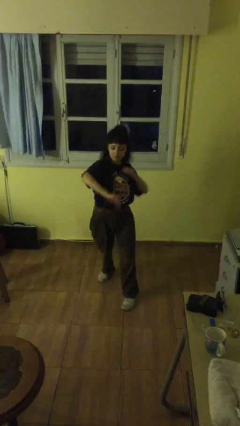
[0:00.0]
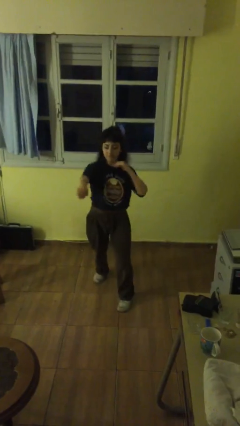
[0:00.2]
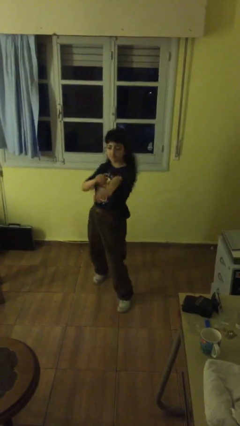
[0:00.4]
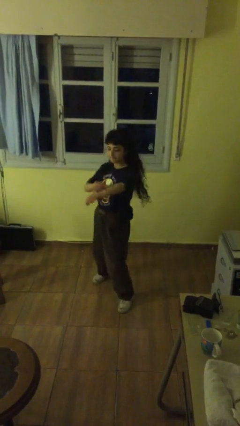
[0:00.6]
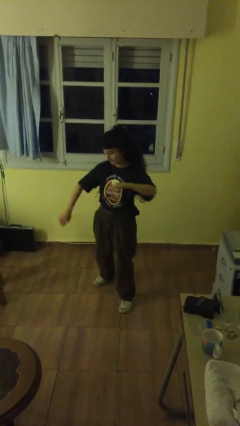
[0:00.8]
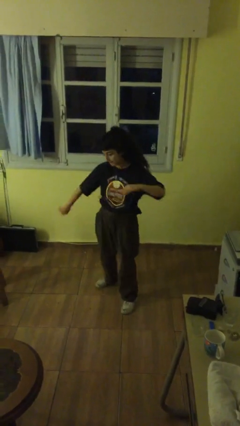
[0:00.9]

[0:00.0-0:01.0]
person karate chop

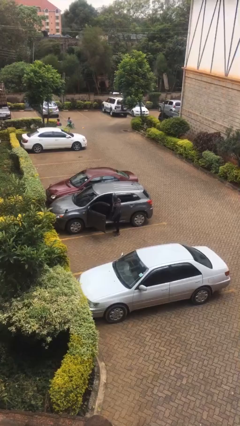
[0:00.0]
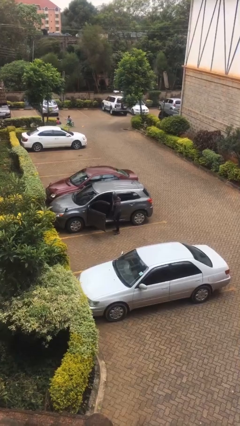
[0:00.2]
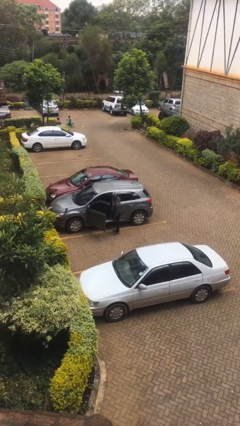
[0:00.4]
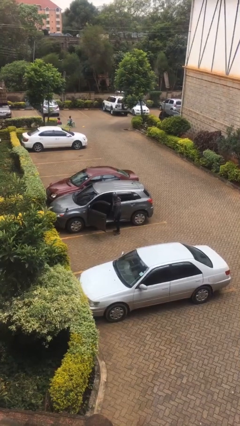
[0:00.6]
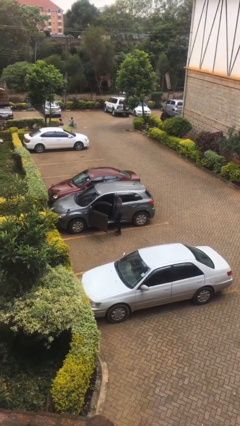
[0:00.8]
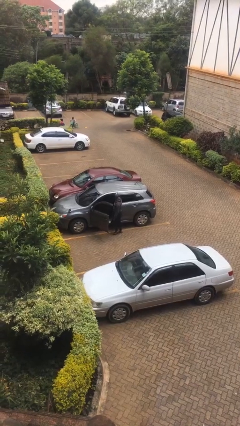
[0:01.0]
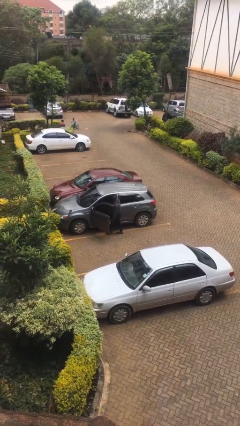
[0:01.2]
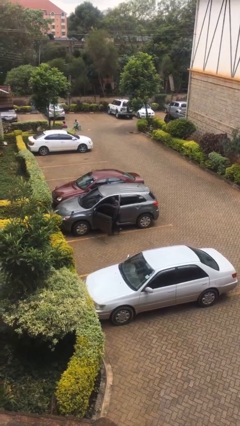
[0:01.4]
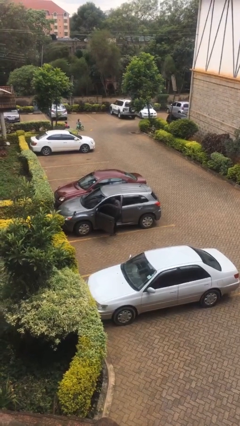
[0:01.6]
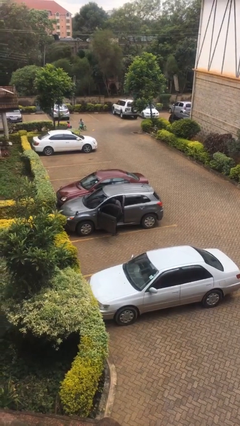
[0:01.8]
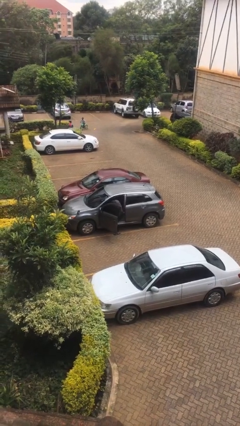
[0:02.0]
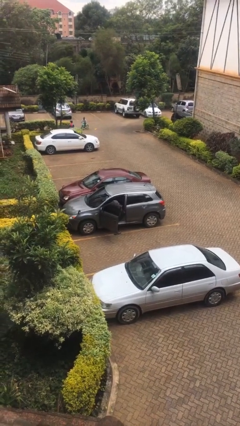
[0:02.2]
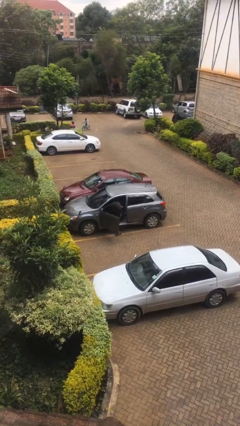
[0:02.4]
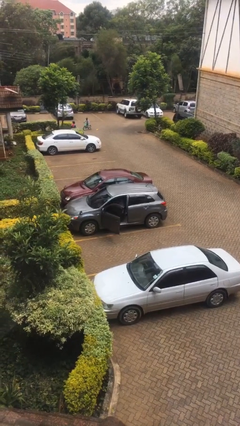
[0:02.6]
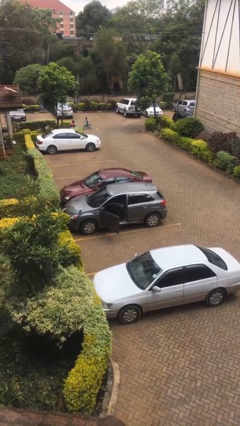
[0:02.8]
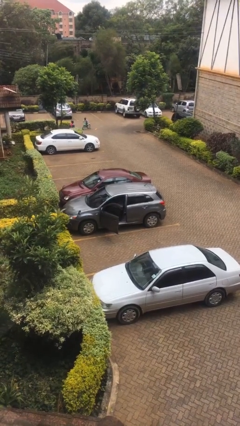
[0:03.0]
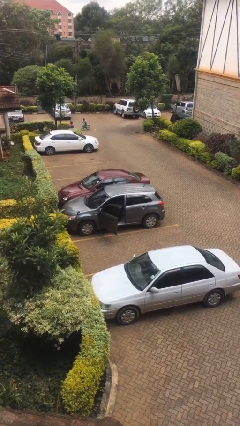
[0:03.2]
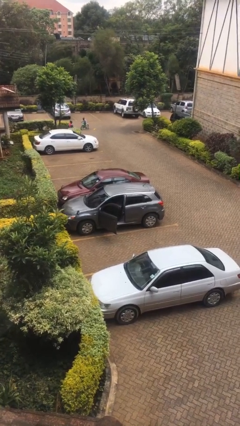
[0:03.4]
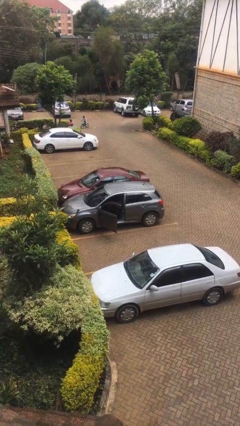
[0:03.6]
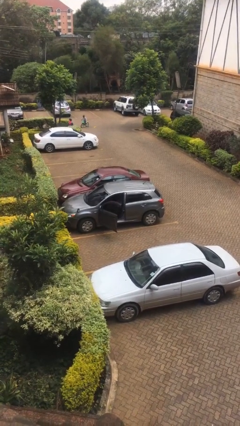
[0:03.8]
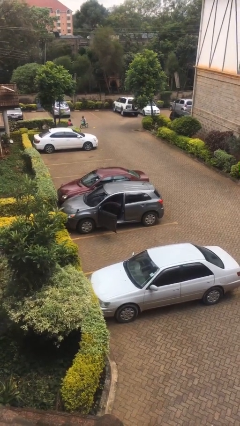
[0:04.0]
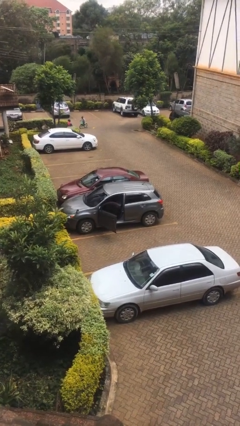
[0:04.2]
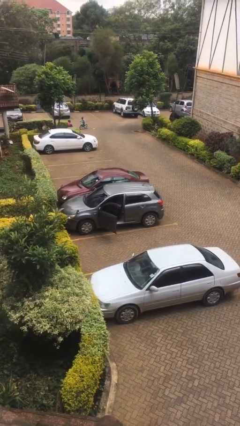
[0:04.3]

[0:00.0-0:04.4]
person enters car

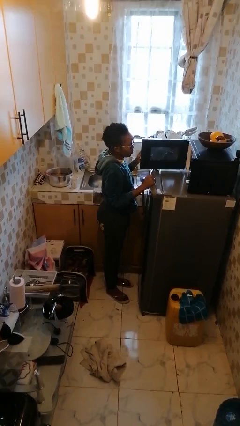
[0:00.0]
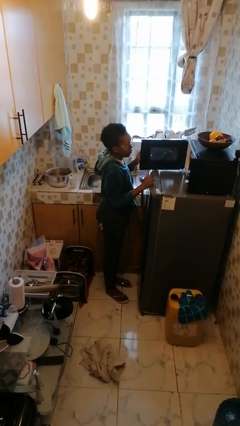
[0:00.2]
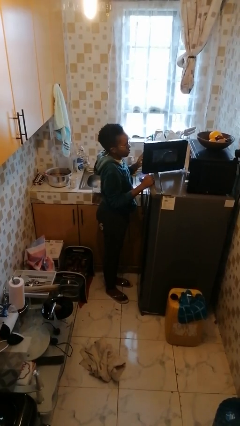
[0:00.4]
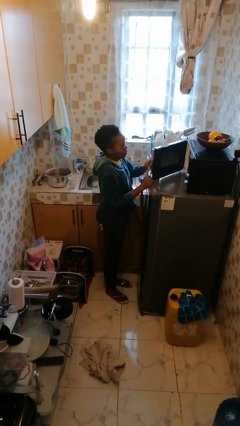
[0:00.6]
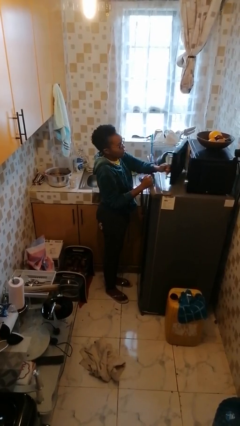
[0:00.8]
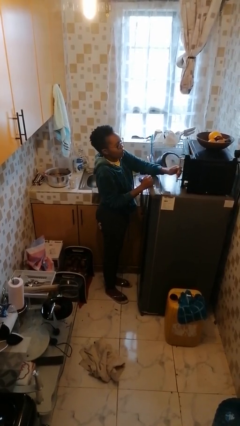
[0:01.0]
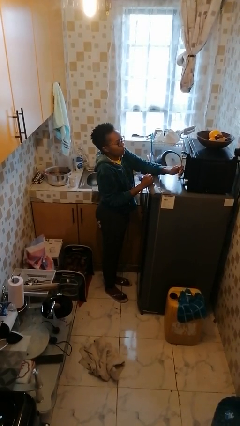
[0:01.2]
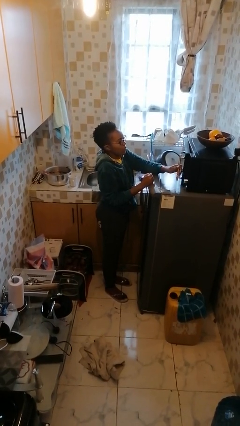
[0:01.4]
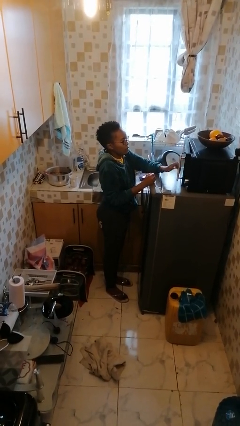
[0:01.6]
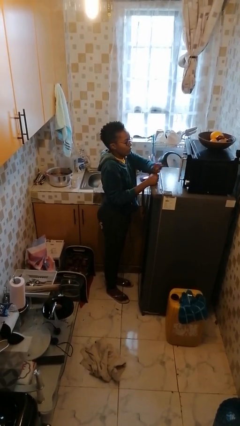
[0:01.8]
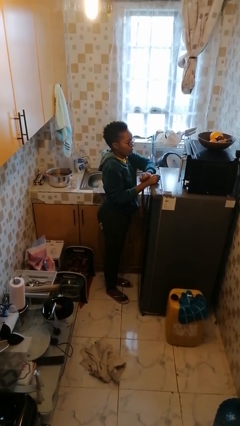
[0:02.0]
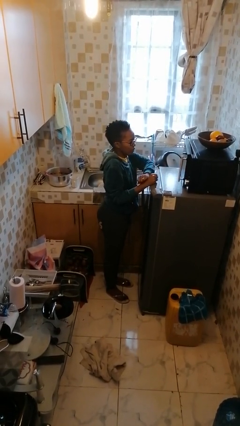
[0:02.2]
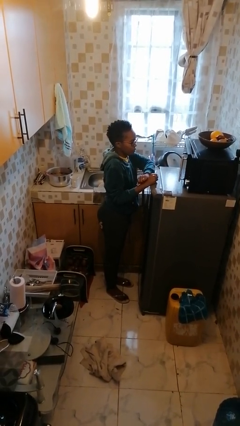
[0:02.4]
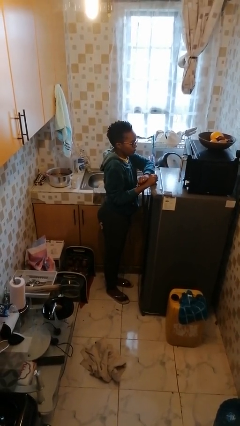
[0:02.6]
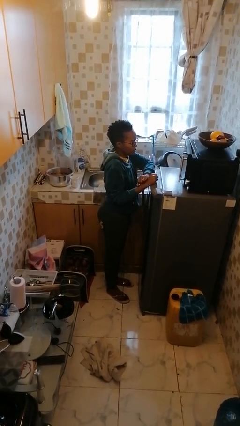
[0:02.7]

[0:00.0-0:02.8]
person closes microwave

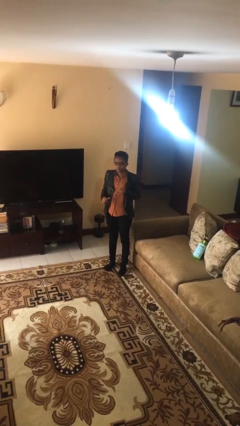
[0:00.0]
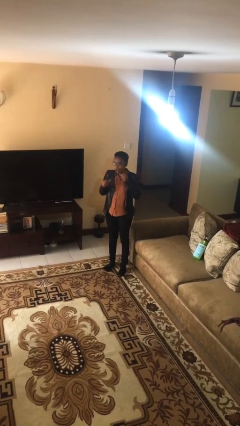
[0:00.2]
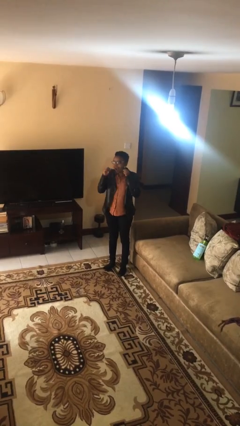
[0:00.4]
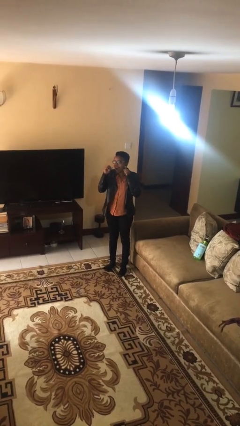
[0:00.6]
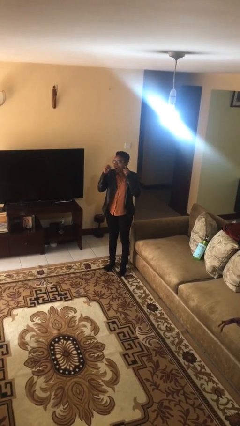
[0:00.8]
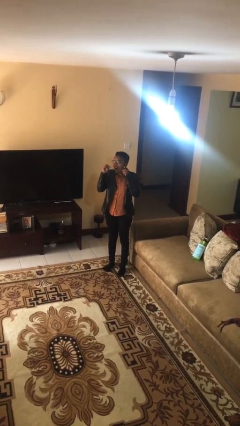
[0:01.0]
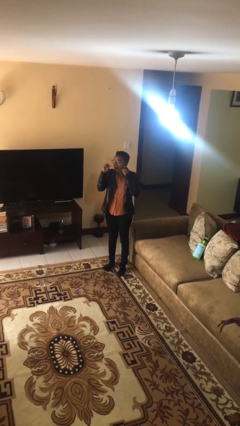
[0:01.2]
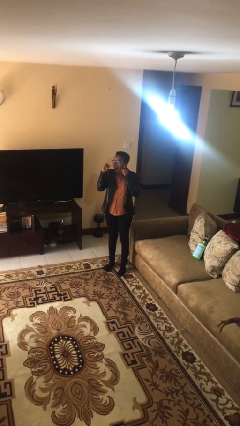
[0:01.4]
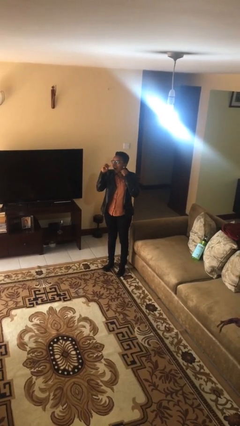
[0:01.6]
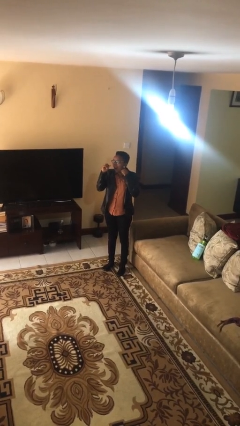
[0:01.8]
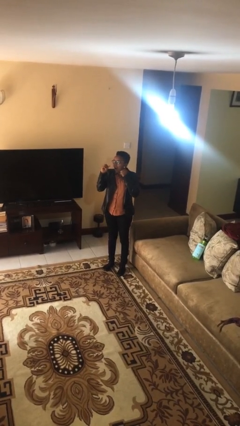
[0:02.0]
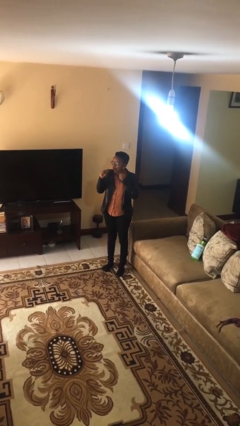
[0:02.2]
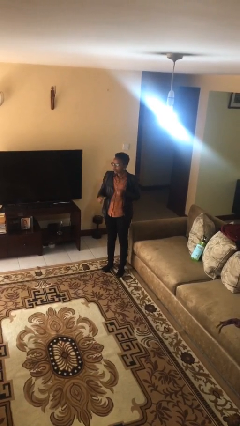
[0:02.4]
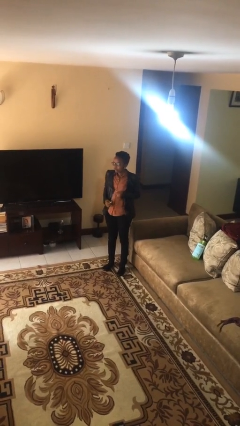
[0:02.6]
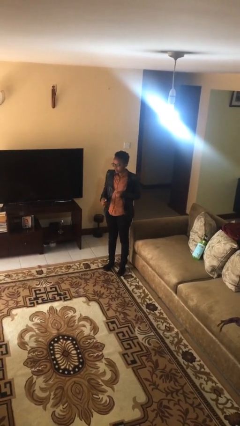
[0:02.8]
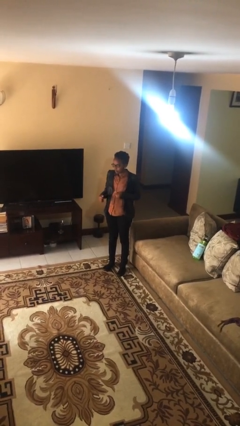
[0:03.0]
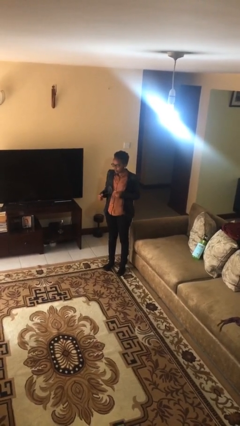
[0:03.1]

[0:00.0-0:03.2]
person flosses

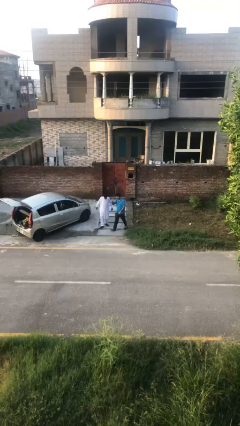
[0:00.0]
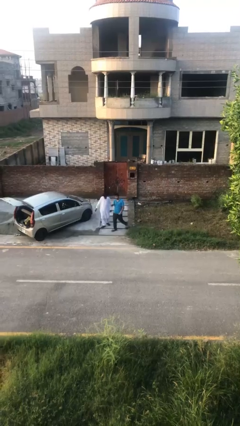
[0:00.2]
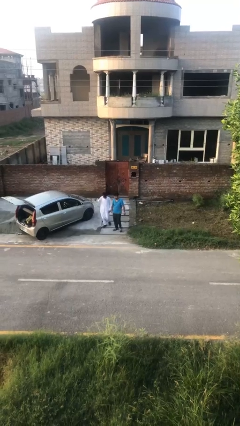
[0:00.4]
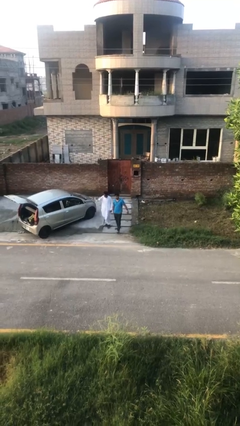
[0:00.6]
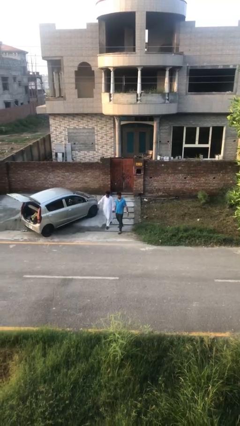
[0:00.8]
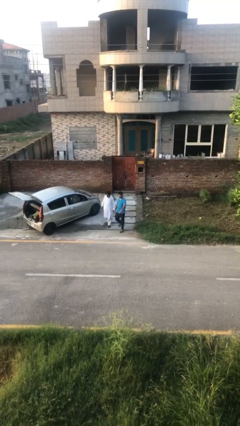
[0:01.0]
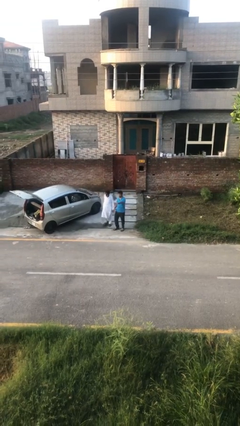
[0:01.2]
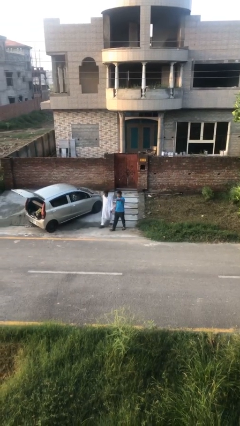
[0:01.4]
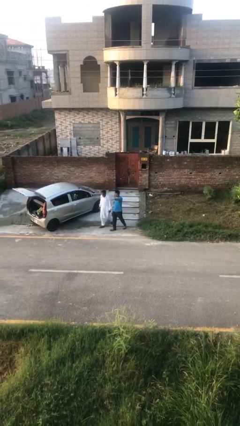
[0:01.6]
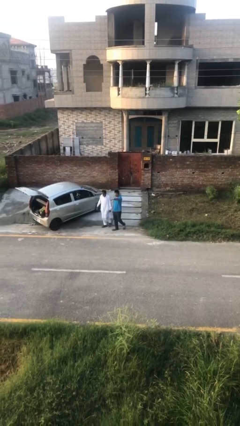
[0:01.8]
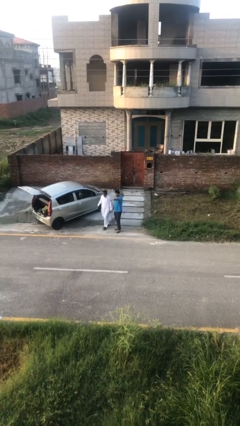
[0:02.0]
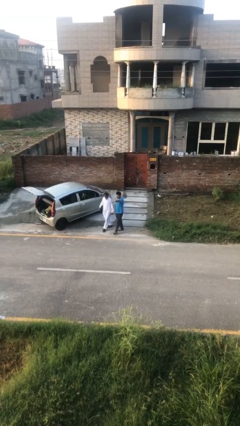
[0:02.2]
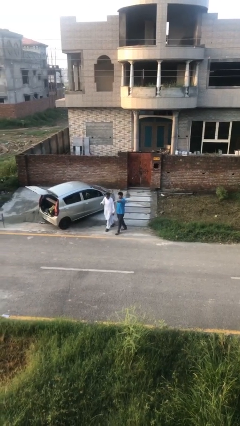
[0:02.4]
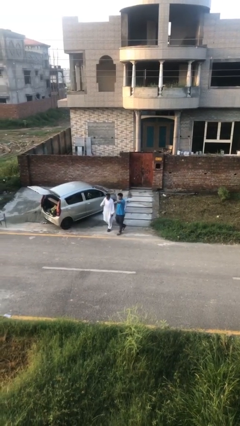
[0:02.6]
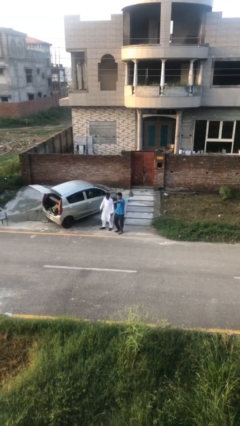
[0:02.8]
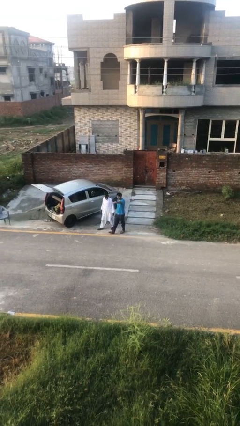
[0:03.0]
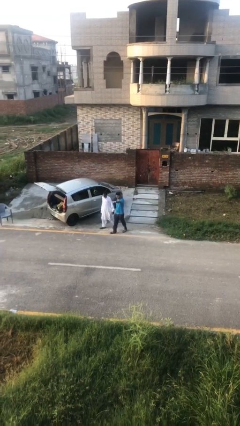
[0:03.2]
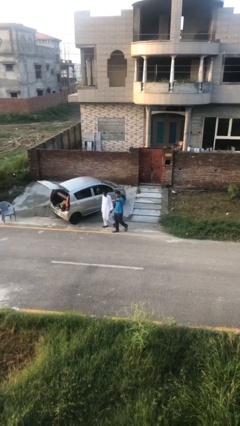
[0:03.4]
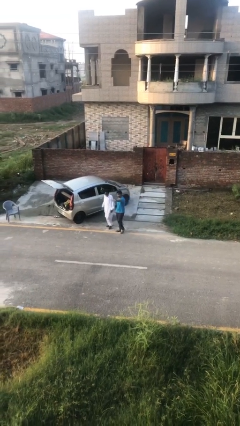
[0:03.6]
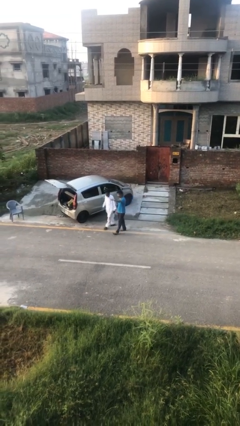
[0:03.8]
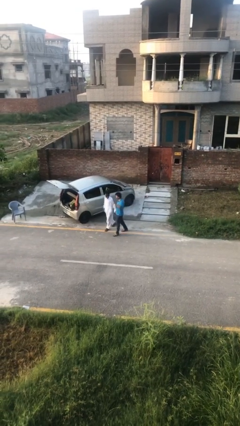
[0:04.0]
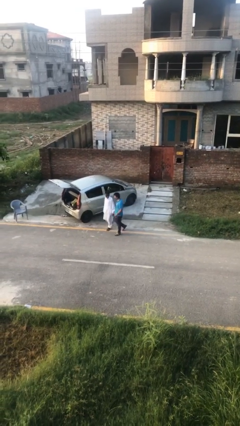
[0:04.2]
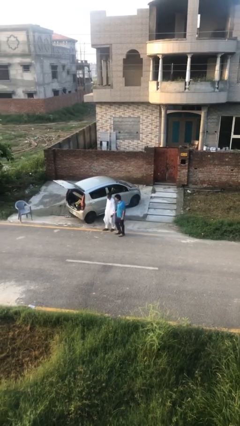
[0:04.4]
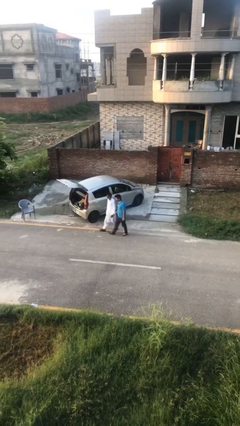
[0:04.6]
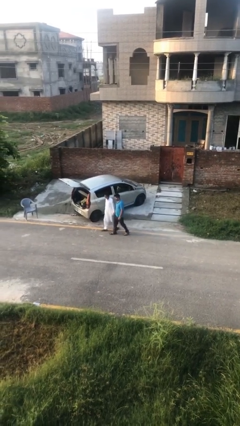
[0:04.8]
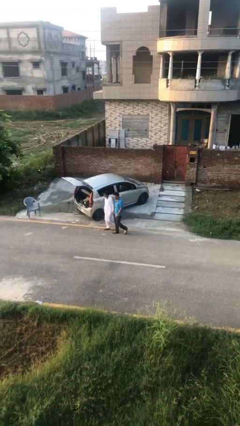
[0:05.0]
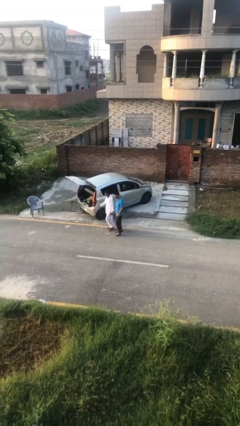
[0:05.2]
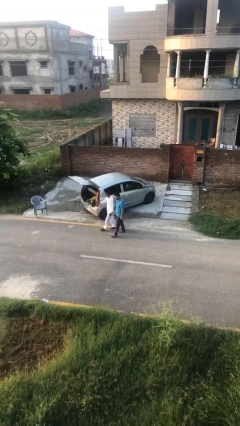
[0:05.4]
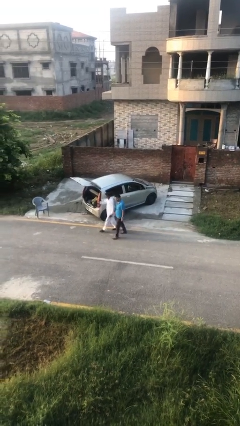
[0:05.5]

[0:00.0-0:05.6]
person talks to person

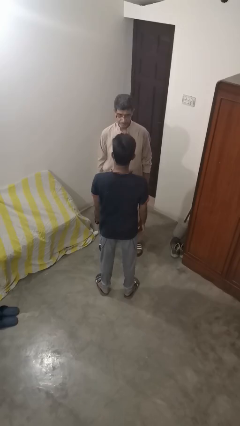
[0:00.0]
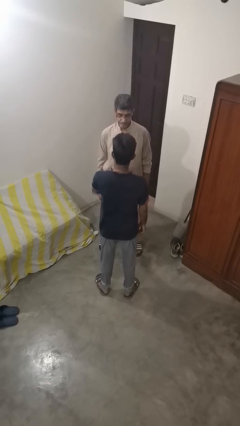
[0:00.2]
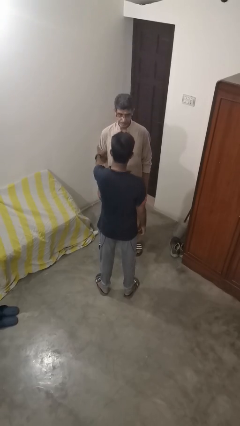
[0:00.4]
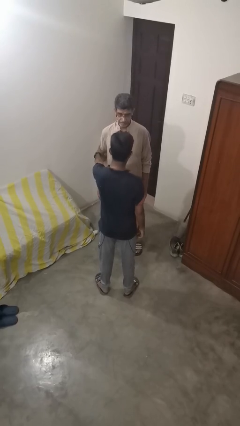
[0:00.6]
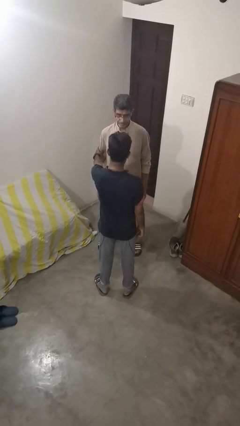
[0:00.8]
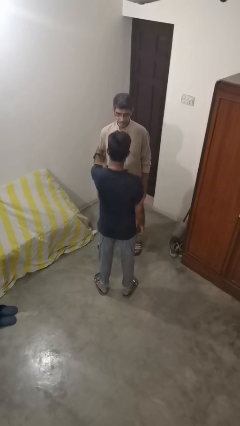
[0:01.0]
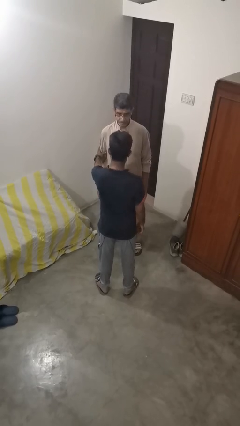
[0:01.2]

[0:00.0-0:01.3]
person grabs person by bicep
